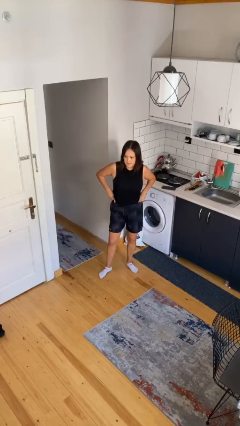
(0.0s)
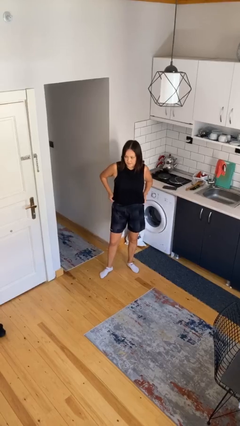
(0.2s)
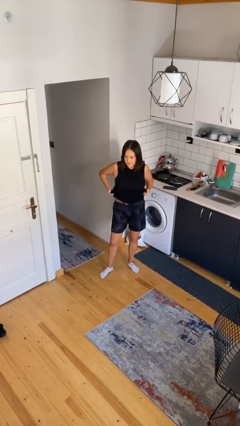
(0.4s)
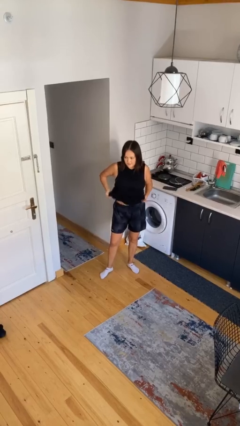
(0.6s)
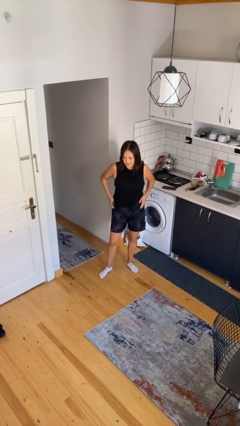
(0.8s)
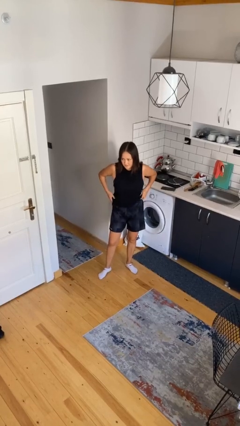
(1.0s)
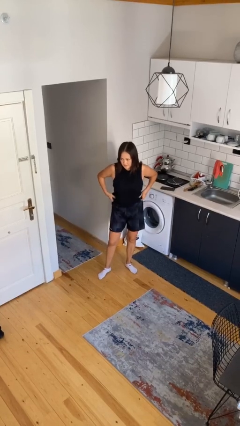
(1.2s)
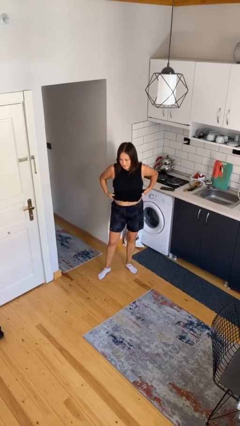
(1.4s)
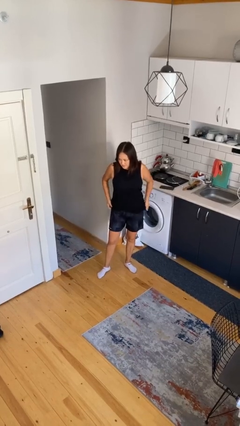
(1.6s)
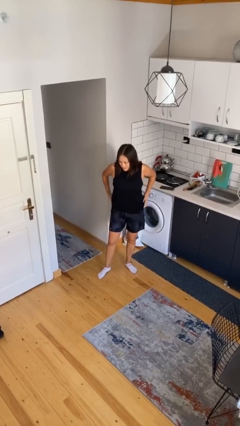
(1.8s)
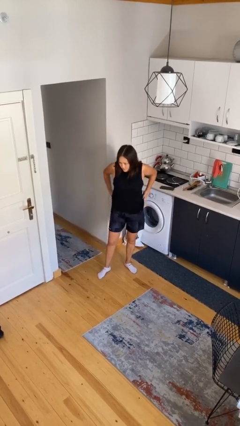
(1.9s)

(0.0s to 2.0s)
person untucks shirt

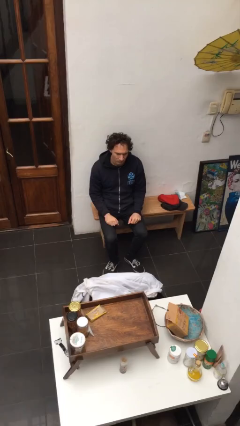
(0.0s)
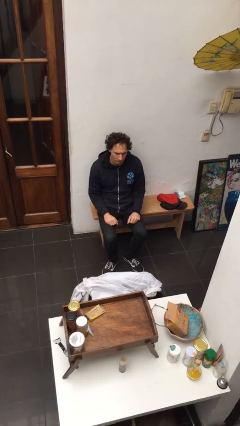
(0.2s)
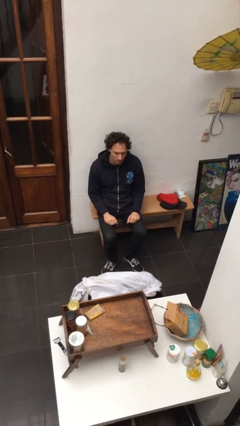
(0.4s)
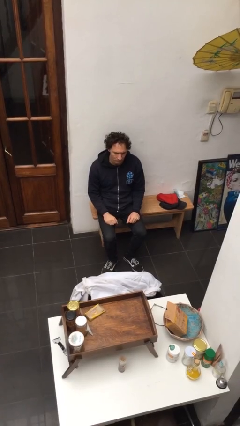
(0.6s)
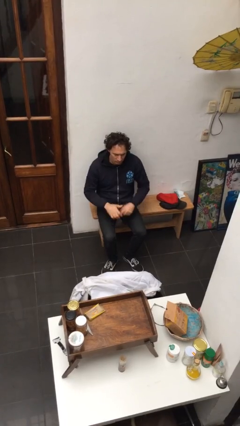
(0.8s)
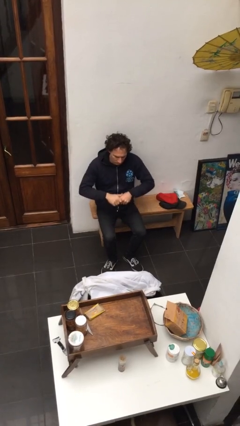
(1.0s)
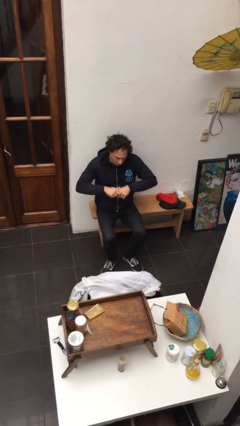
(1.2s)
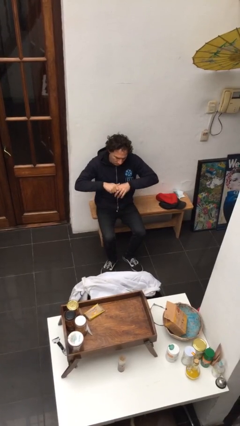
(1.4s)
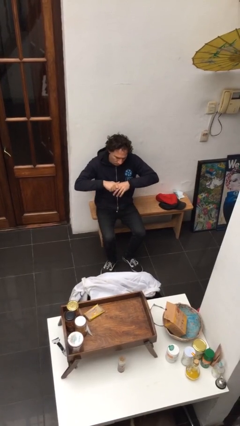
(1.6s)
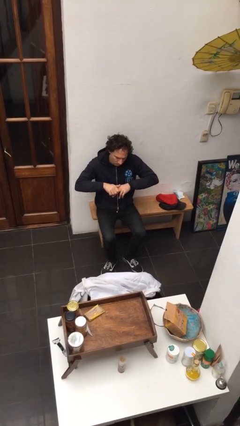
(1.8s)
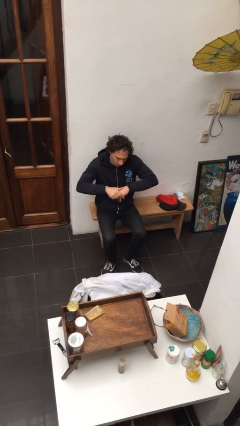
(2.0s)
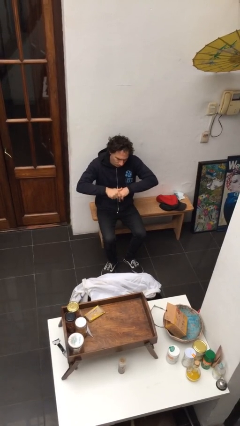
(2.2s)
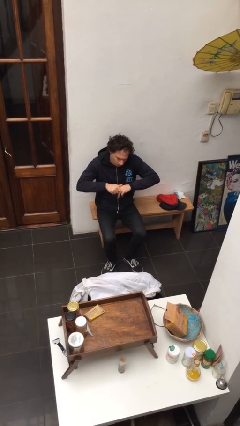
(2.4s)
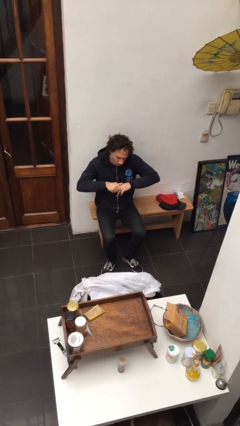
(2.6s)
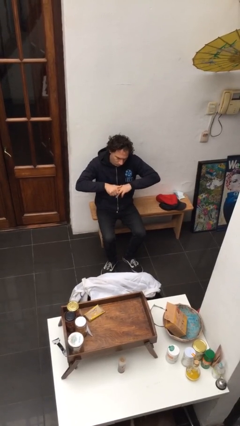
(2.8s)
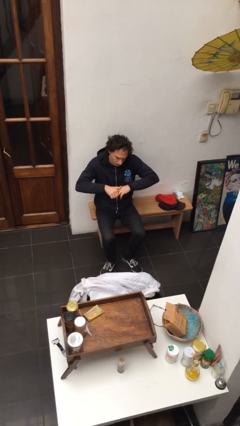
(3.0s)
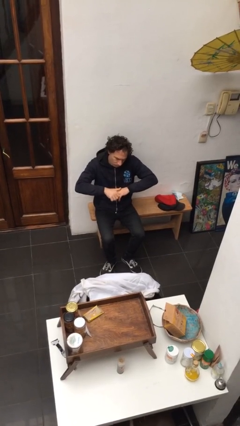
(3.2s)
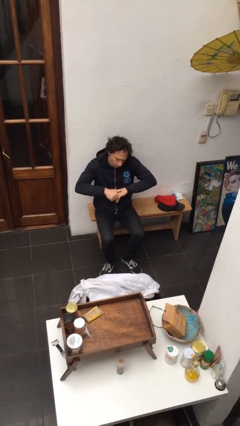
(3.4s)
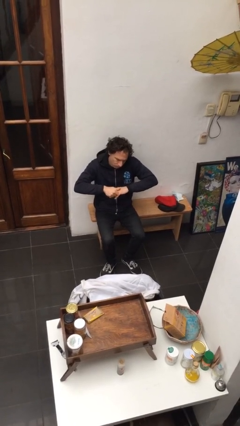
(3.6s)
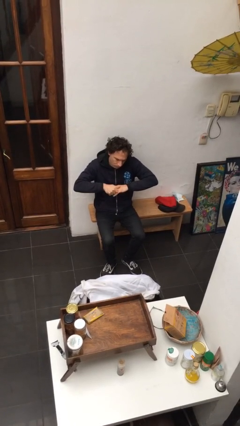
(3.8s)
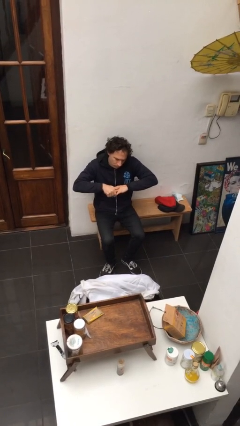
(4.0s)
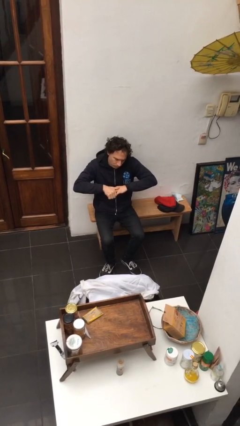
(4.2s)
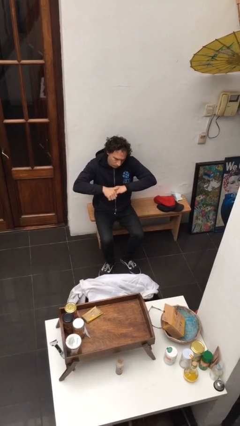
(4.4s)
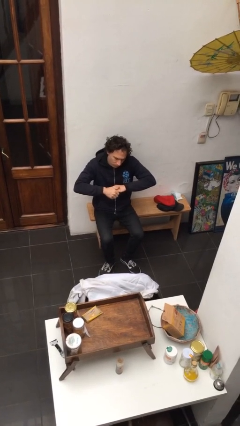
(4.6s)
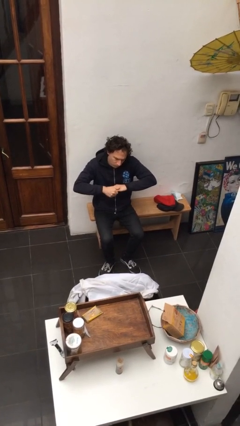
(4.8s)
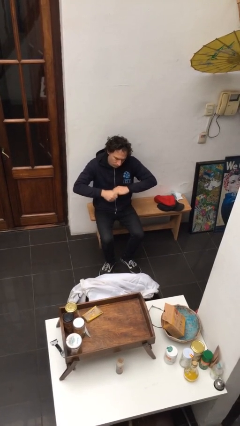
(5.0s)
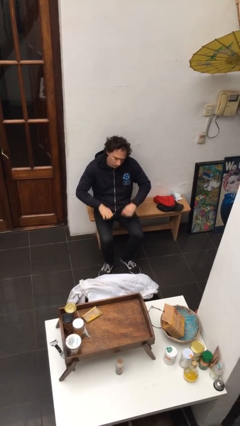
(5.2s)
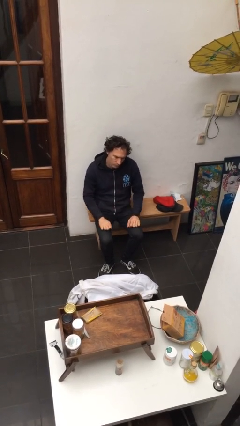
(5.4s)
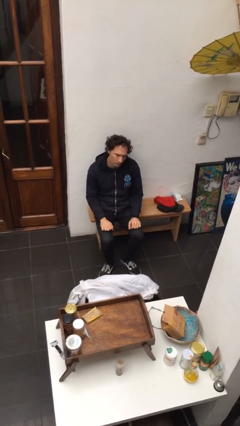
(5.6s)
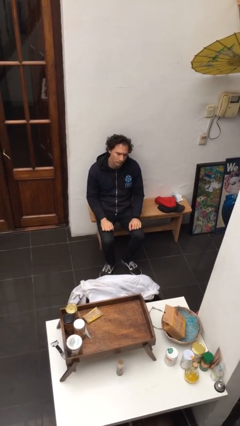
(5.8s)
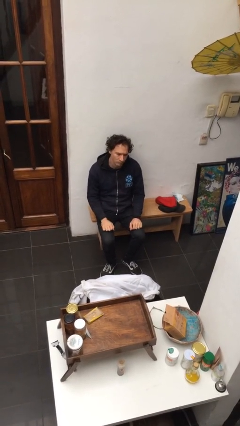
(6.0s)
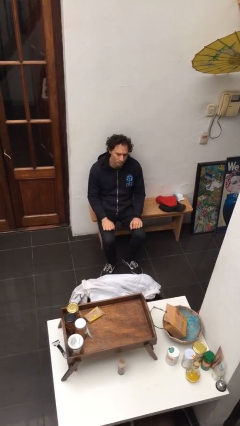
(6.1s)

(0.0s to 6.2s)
person cracks knuckles

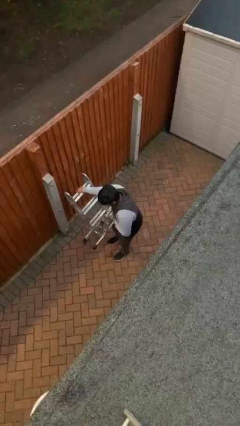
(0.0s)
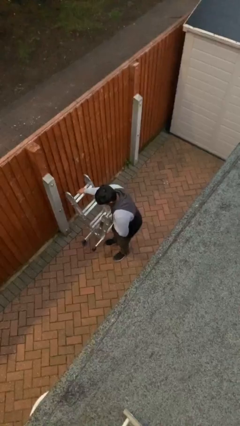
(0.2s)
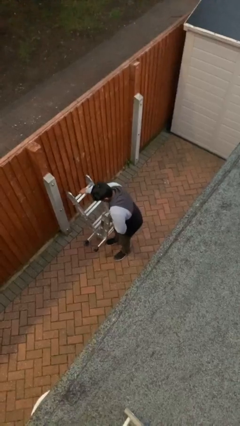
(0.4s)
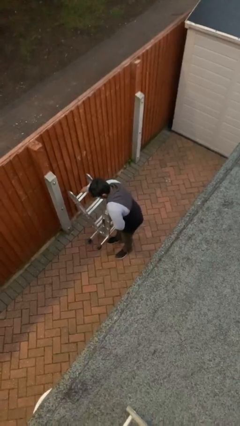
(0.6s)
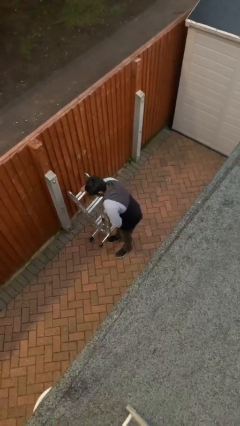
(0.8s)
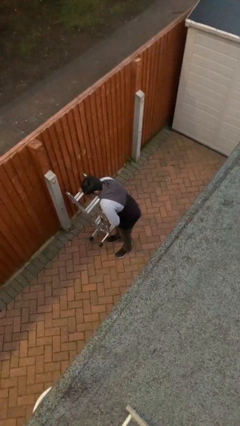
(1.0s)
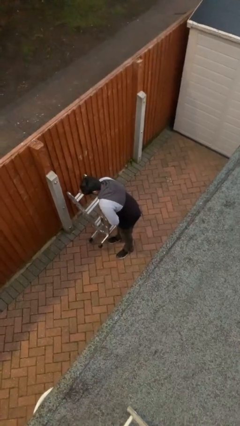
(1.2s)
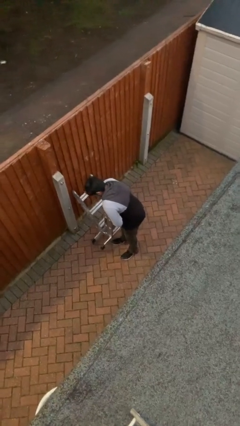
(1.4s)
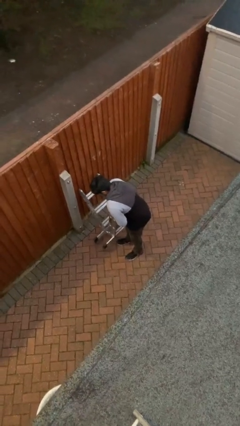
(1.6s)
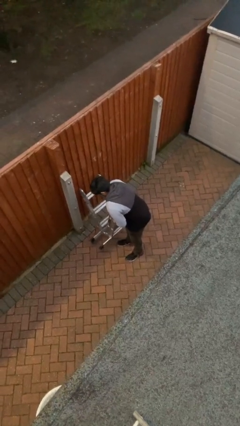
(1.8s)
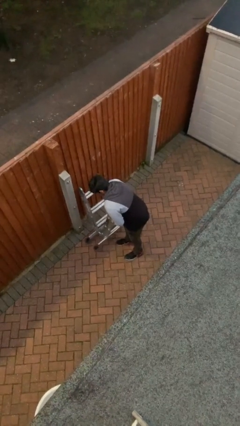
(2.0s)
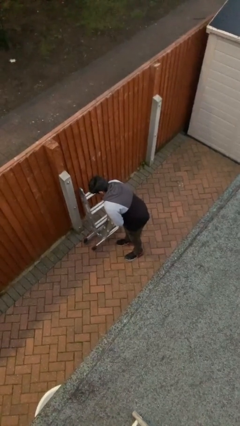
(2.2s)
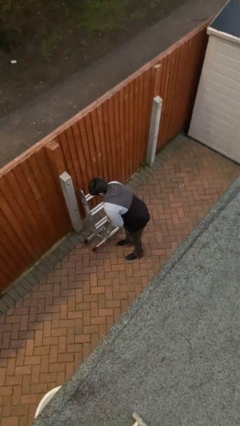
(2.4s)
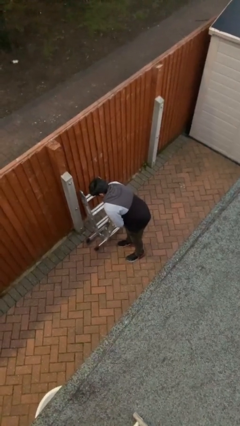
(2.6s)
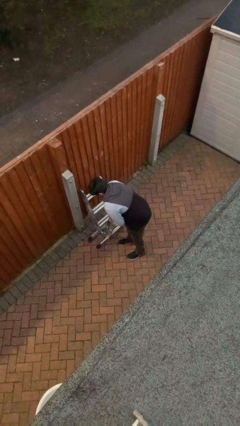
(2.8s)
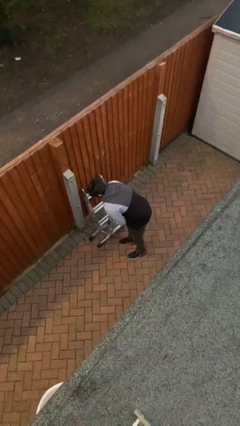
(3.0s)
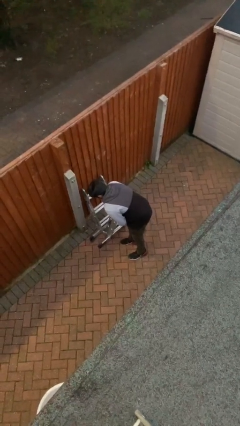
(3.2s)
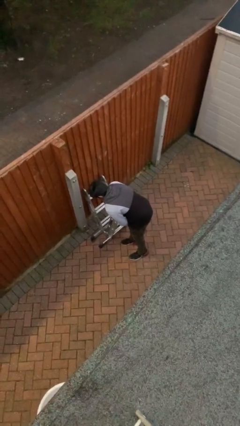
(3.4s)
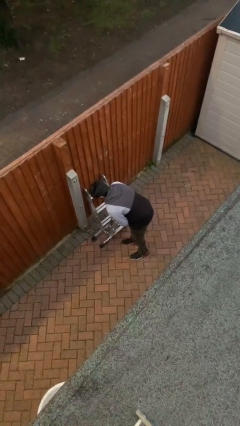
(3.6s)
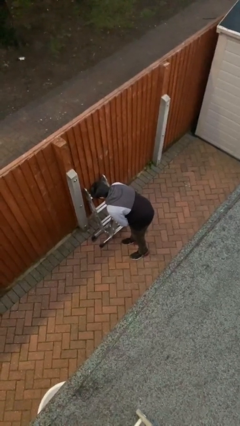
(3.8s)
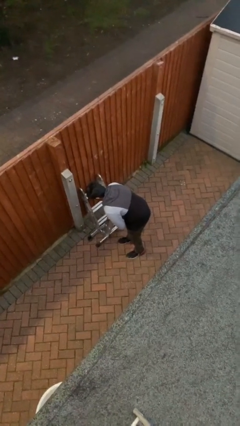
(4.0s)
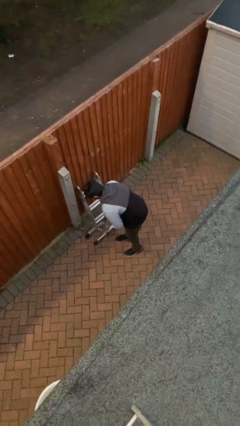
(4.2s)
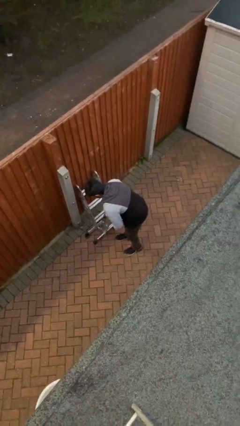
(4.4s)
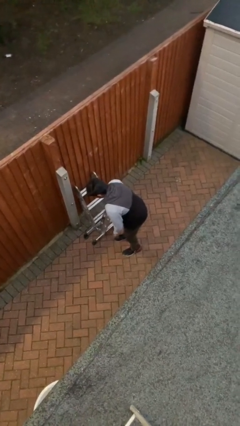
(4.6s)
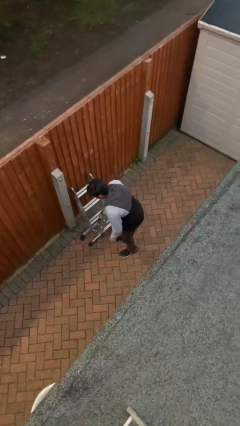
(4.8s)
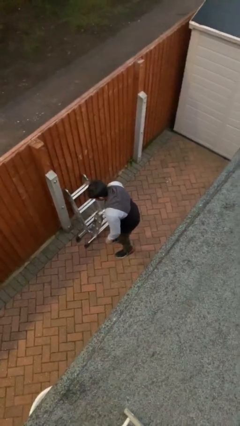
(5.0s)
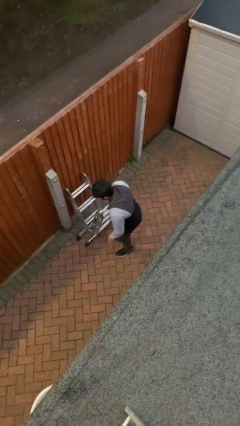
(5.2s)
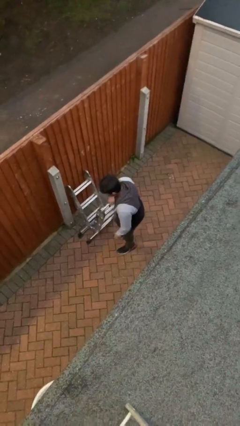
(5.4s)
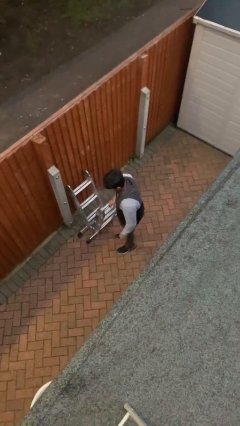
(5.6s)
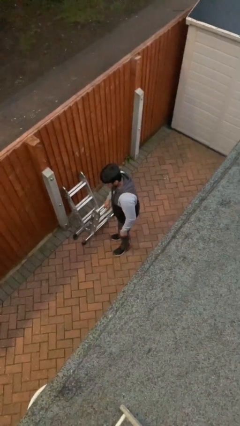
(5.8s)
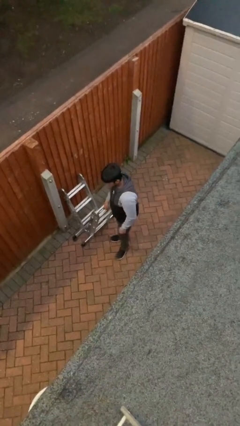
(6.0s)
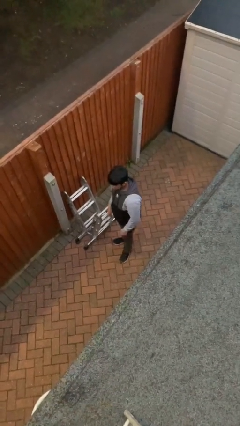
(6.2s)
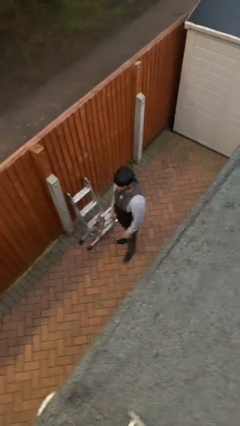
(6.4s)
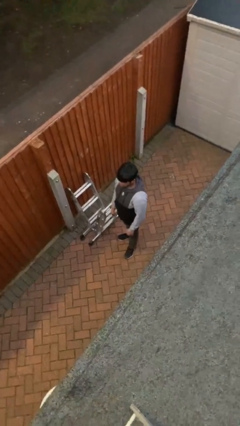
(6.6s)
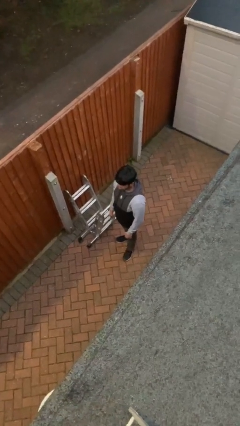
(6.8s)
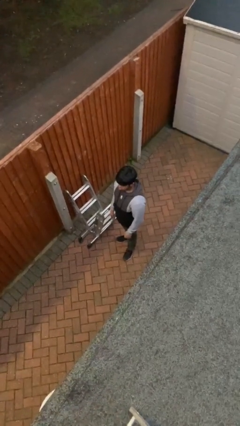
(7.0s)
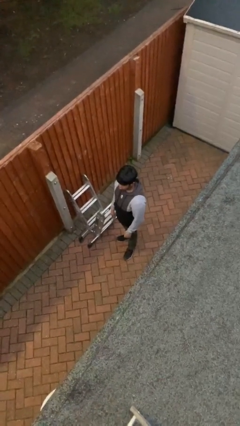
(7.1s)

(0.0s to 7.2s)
person puts down object on floor

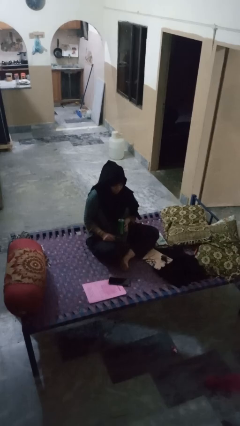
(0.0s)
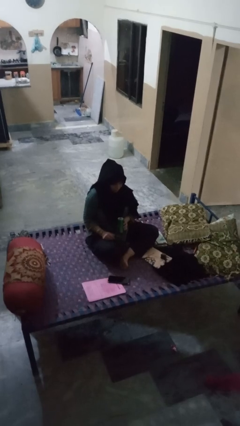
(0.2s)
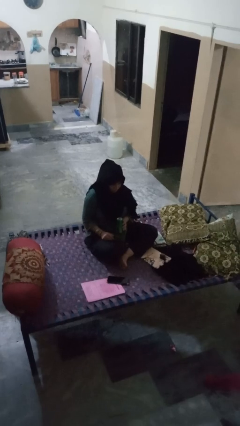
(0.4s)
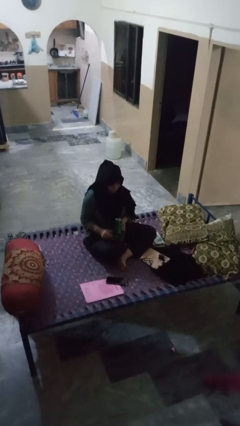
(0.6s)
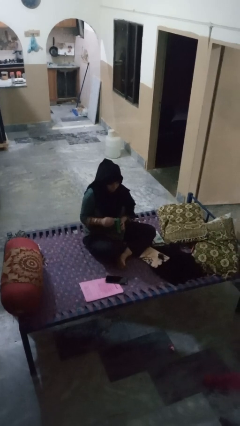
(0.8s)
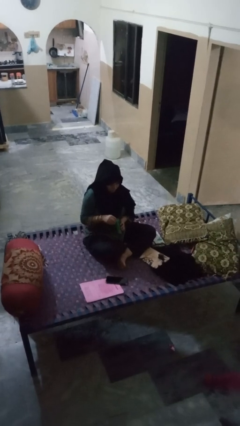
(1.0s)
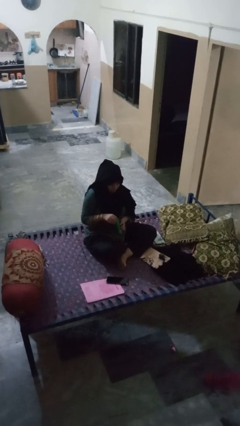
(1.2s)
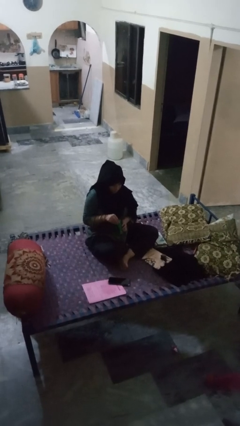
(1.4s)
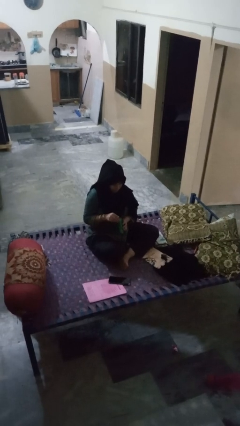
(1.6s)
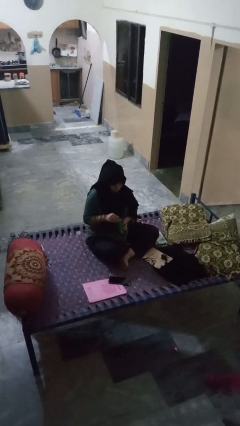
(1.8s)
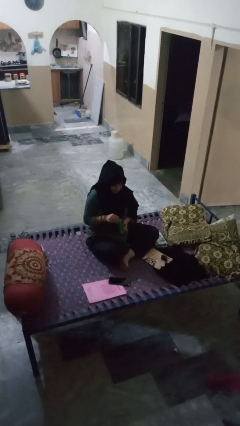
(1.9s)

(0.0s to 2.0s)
person opens can with can opener

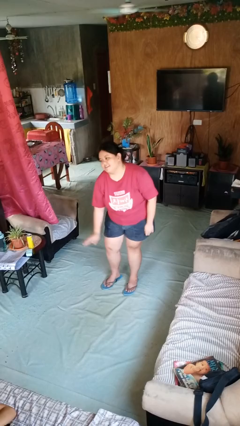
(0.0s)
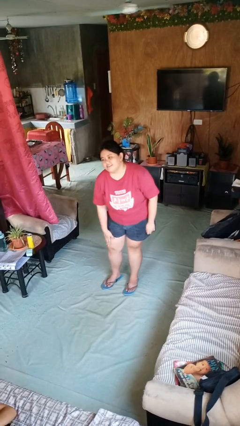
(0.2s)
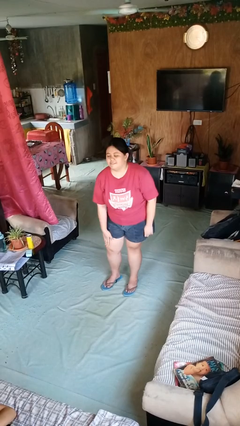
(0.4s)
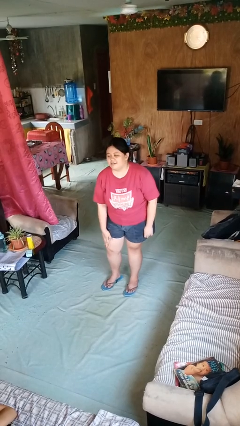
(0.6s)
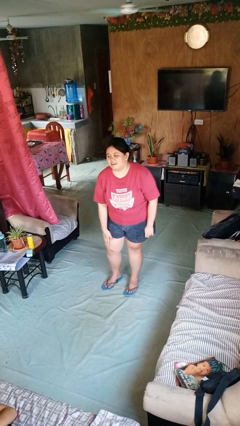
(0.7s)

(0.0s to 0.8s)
person swats bug
